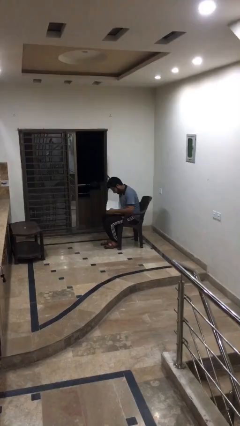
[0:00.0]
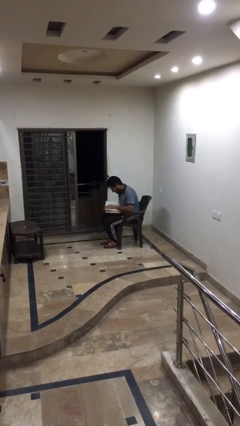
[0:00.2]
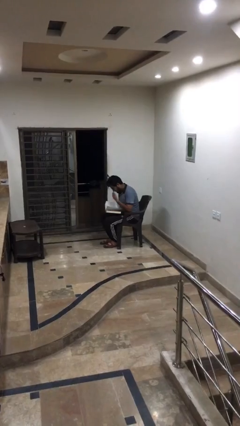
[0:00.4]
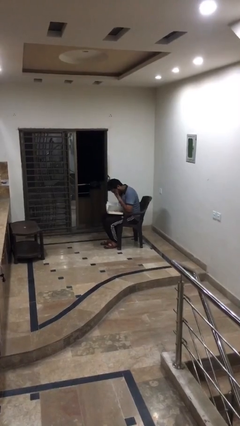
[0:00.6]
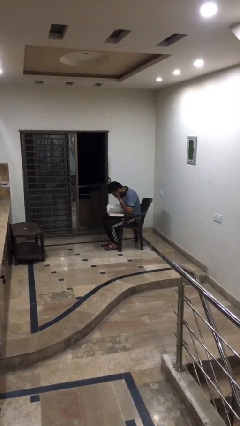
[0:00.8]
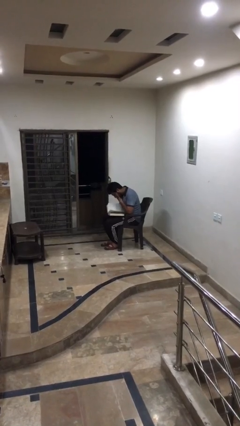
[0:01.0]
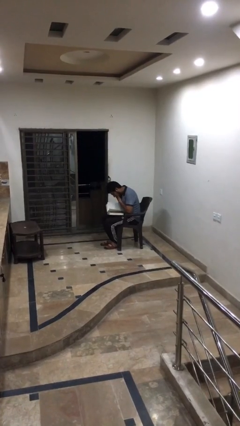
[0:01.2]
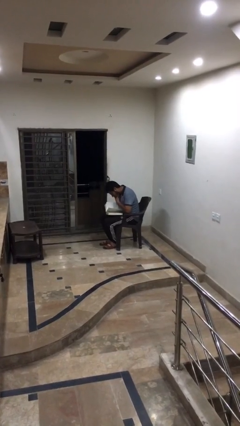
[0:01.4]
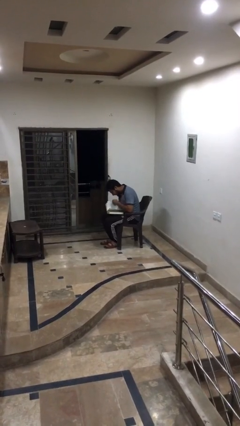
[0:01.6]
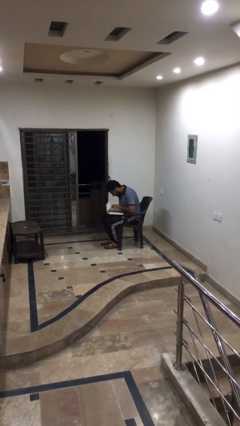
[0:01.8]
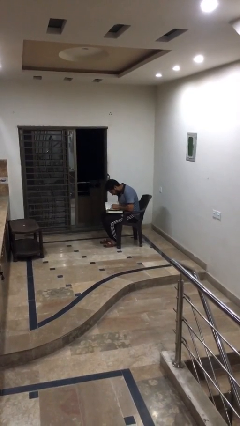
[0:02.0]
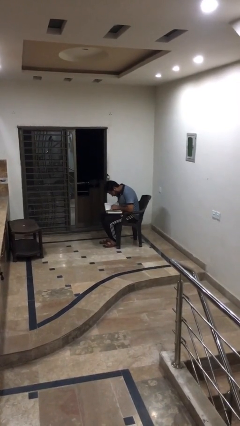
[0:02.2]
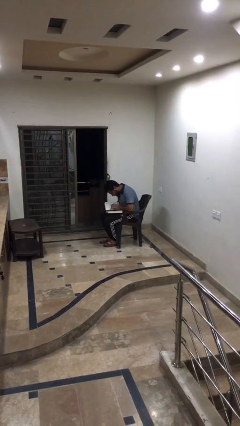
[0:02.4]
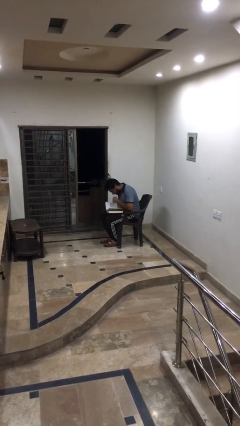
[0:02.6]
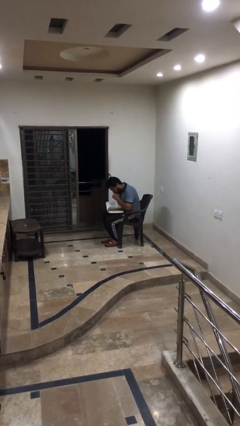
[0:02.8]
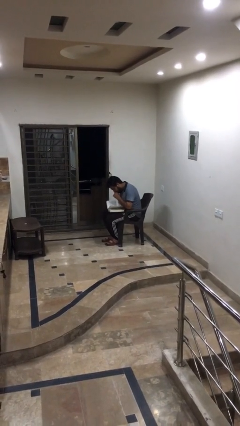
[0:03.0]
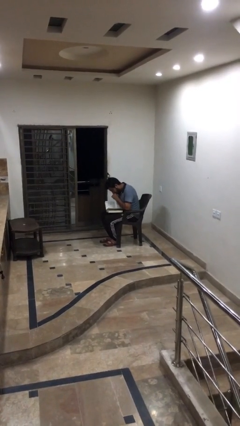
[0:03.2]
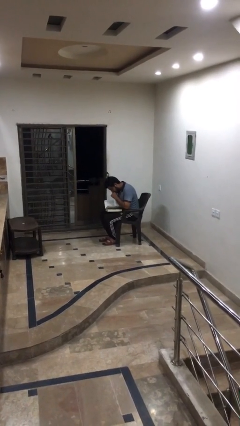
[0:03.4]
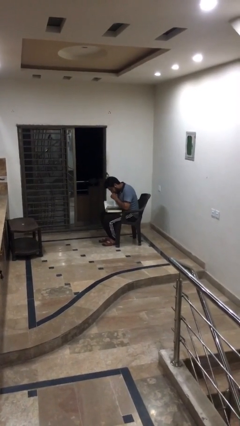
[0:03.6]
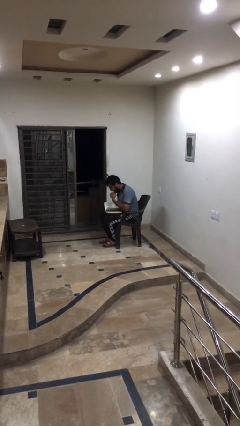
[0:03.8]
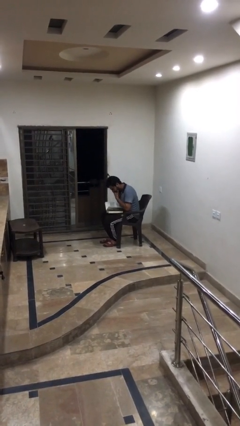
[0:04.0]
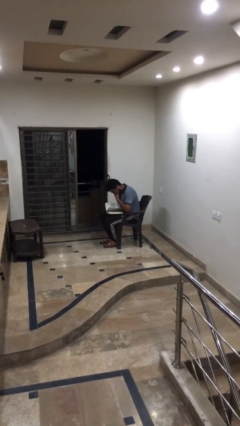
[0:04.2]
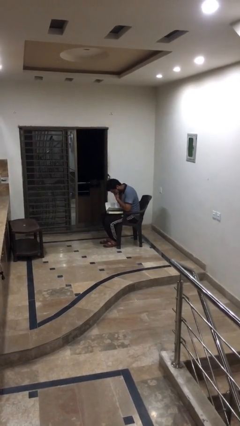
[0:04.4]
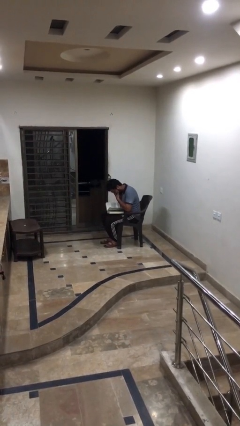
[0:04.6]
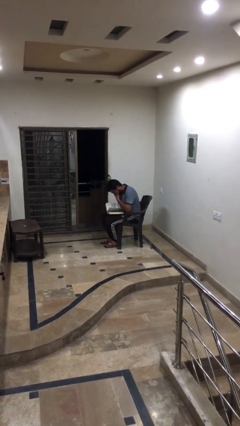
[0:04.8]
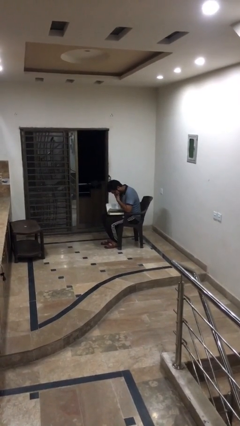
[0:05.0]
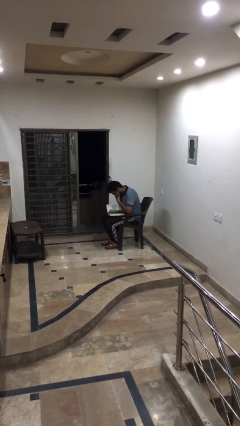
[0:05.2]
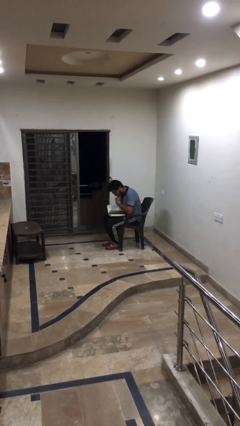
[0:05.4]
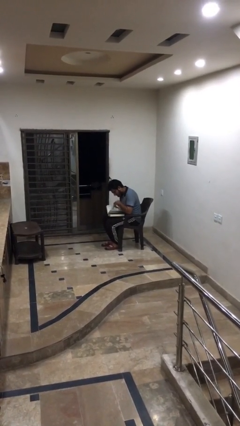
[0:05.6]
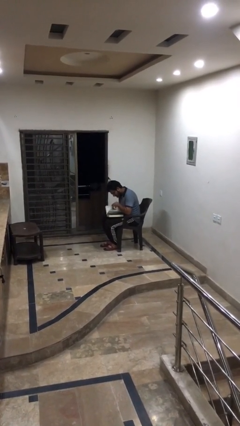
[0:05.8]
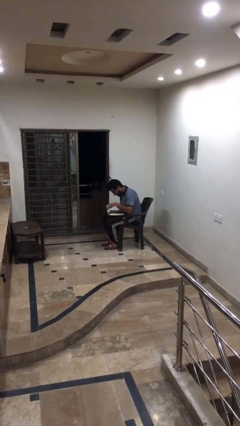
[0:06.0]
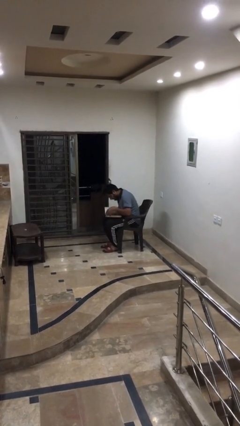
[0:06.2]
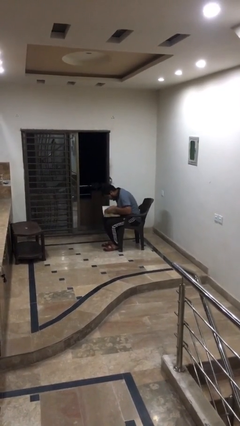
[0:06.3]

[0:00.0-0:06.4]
person reads document

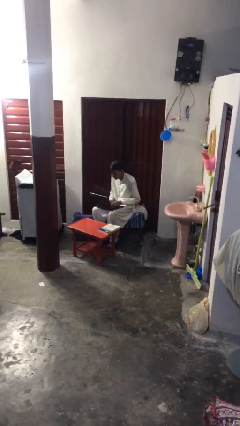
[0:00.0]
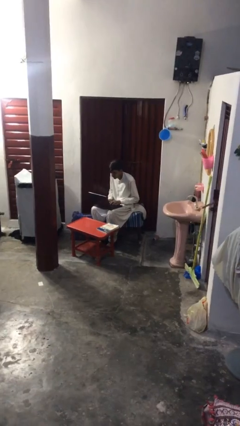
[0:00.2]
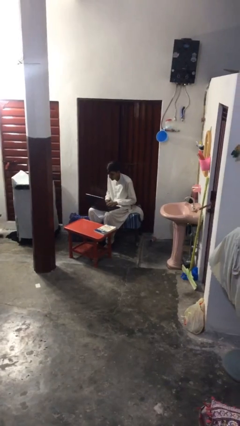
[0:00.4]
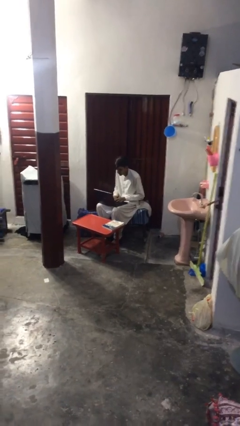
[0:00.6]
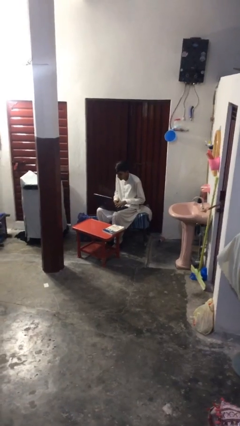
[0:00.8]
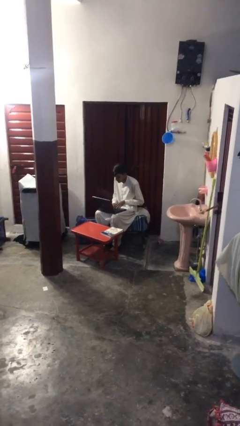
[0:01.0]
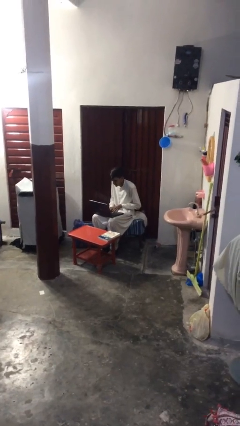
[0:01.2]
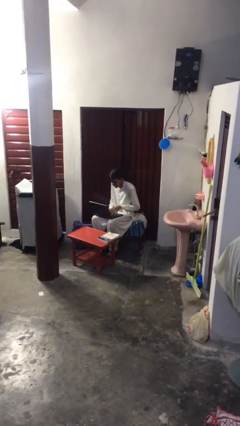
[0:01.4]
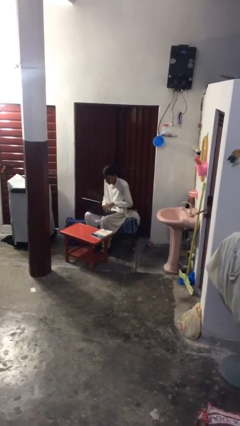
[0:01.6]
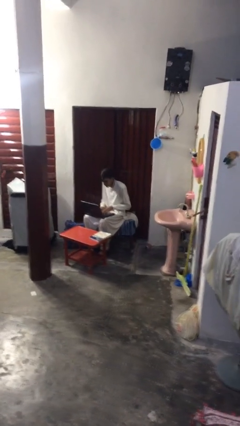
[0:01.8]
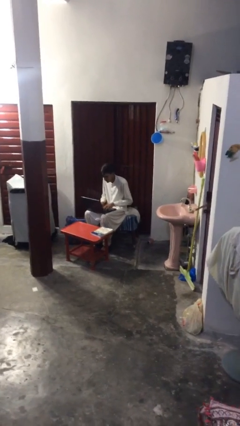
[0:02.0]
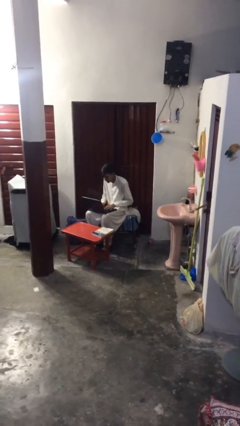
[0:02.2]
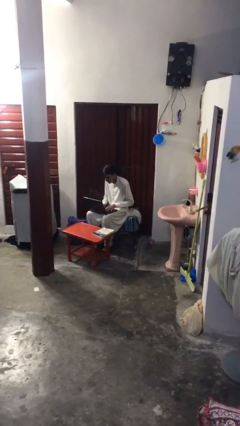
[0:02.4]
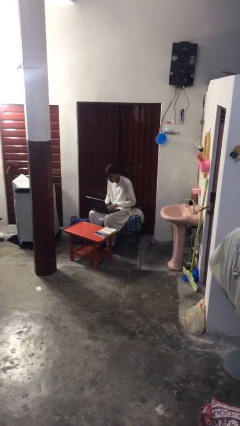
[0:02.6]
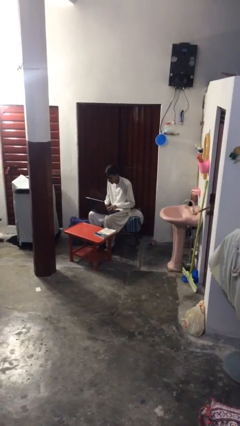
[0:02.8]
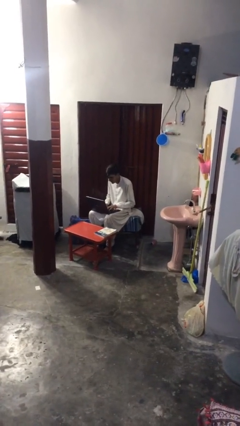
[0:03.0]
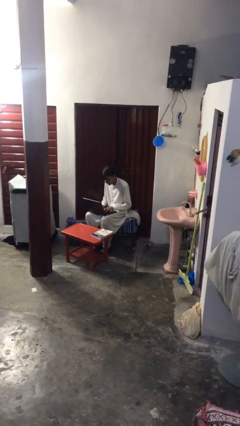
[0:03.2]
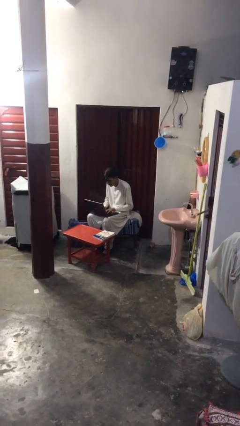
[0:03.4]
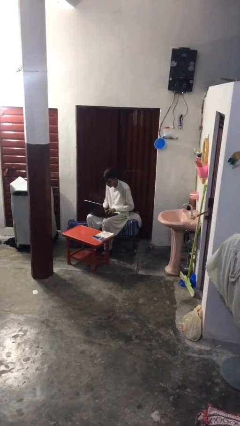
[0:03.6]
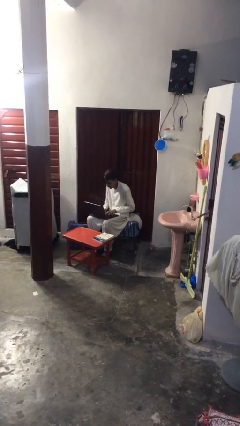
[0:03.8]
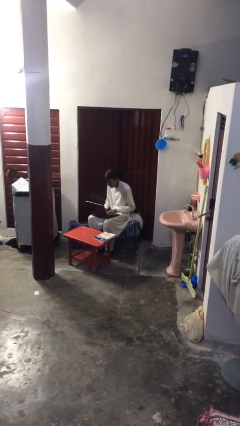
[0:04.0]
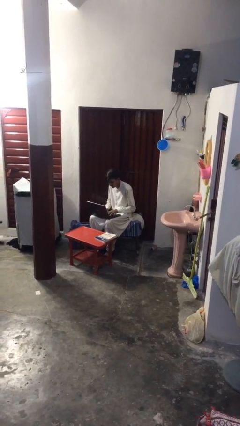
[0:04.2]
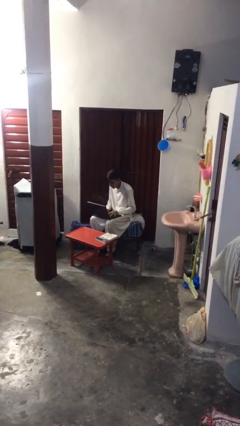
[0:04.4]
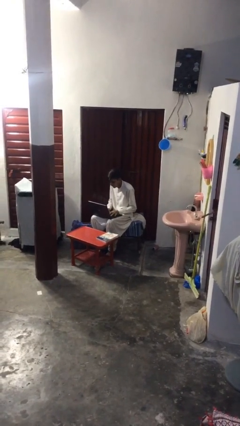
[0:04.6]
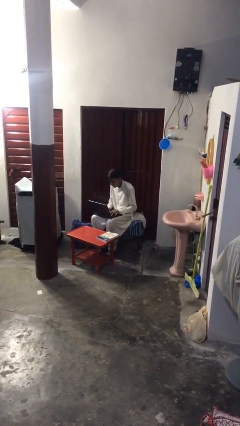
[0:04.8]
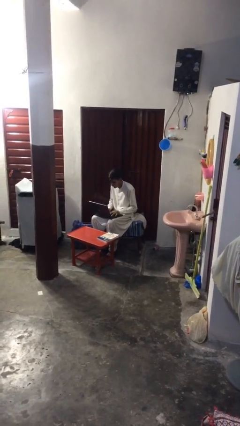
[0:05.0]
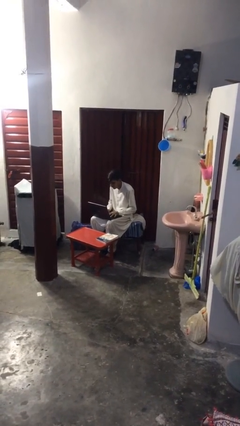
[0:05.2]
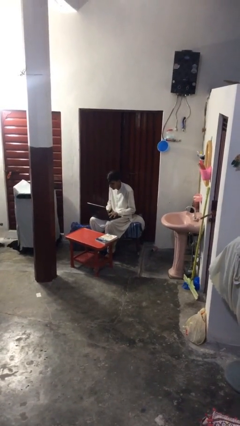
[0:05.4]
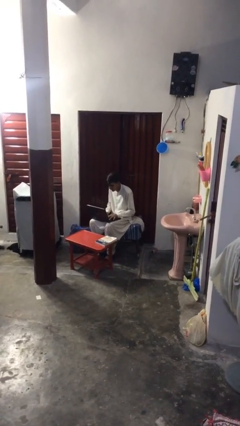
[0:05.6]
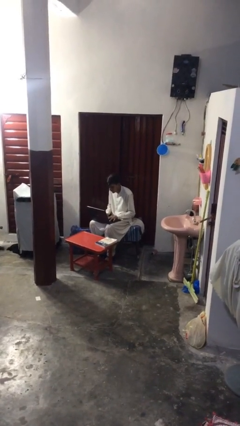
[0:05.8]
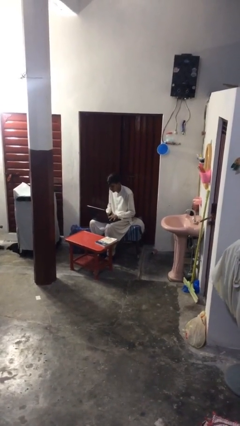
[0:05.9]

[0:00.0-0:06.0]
person interacts with laptop

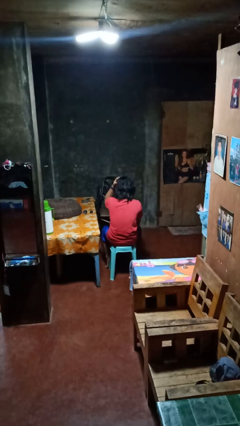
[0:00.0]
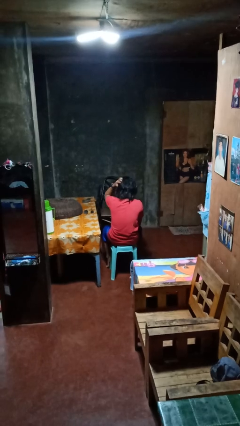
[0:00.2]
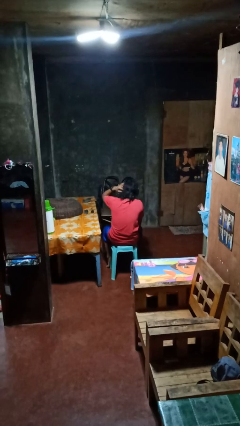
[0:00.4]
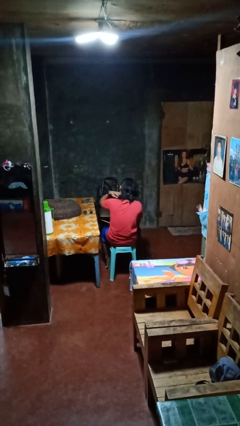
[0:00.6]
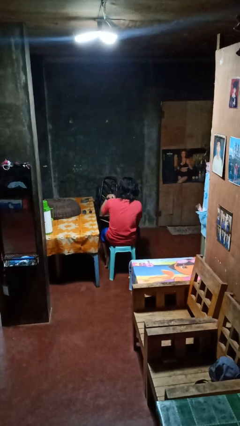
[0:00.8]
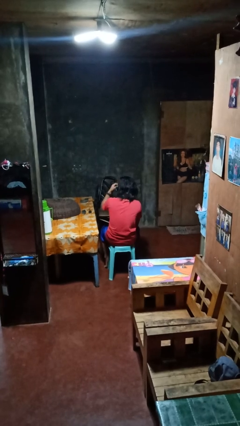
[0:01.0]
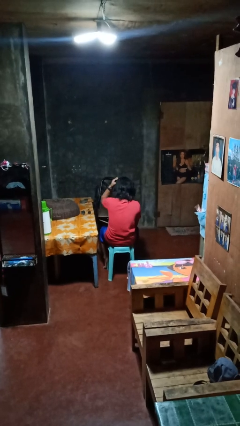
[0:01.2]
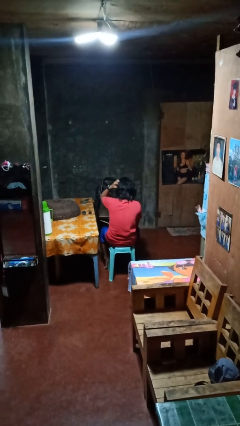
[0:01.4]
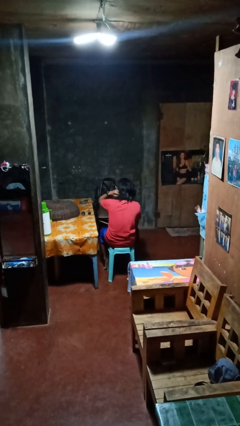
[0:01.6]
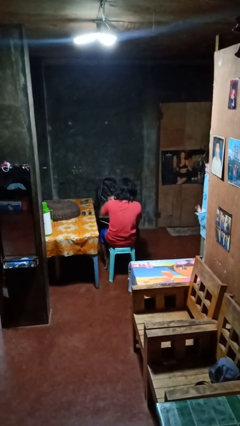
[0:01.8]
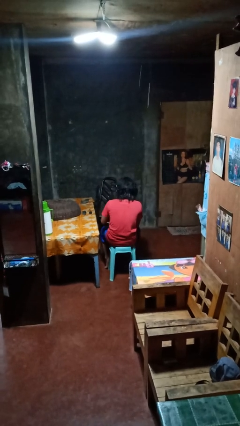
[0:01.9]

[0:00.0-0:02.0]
person strokes hair

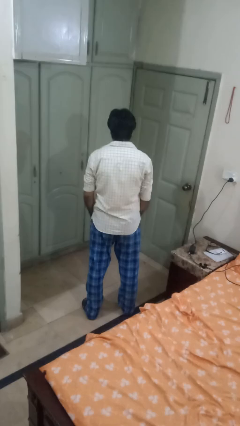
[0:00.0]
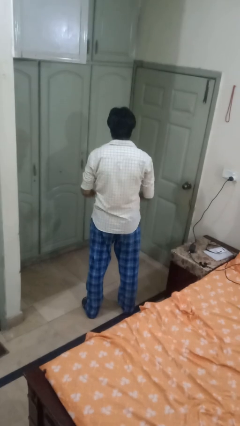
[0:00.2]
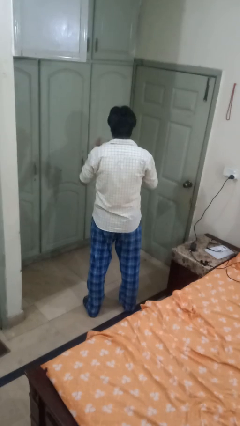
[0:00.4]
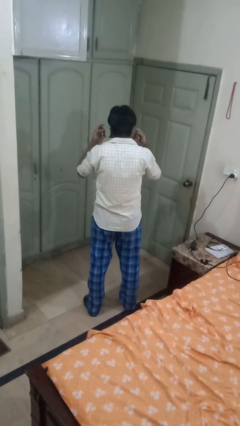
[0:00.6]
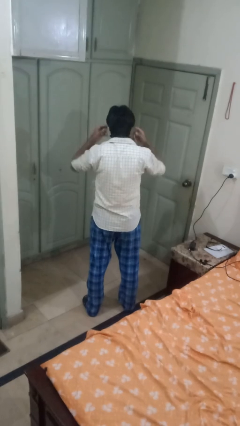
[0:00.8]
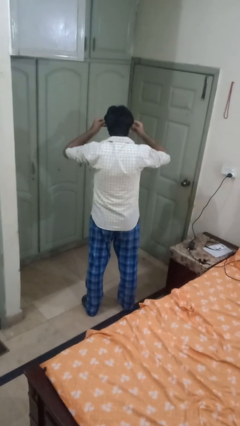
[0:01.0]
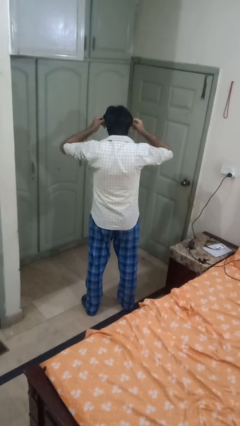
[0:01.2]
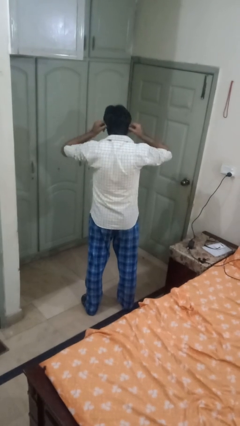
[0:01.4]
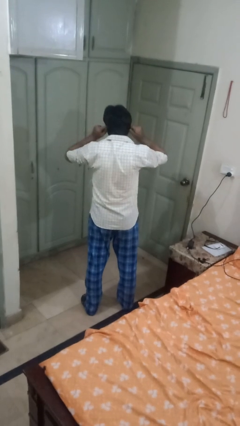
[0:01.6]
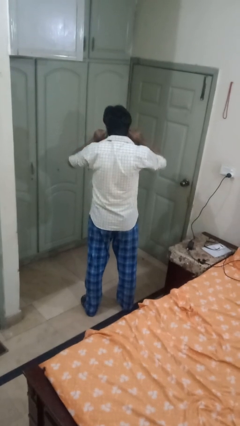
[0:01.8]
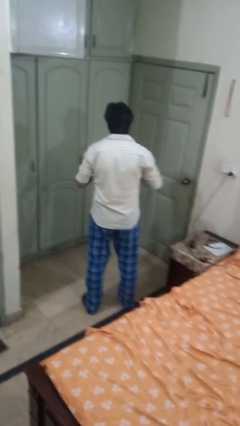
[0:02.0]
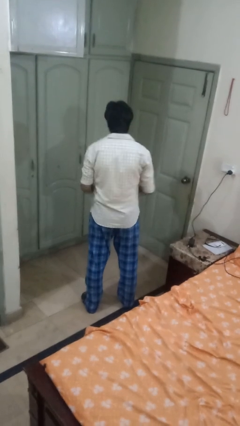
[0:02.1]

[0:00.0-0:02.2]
person puts on facemask

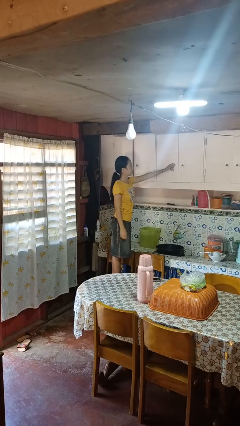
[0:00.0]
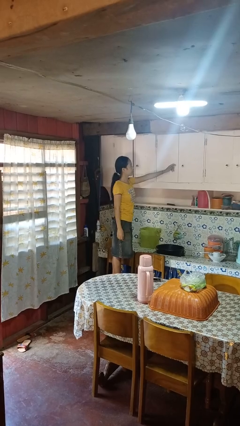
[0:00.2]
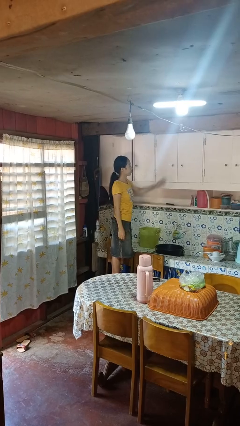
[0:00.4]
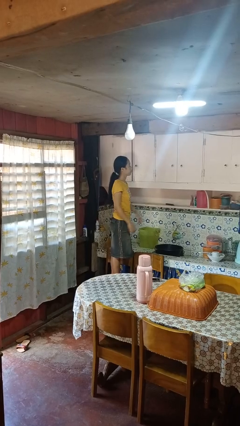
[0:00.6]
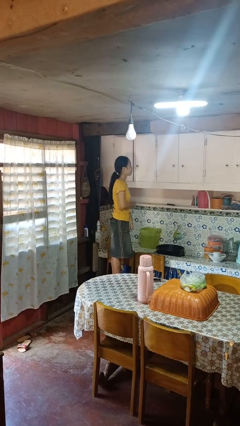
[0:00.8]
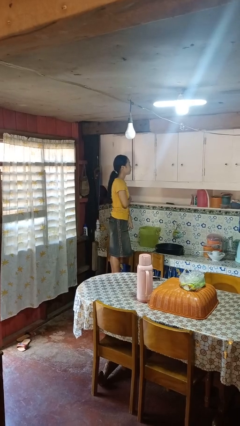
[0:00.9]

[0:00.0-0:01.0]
person closes cabinet

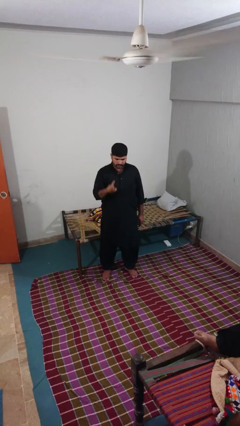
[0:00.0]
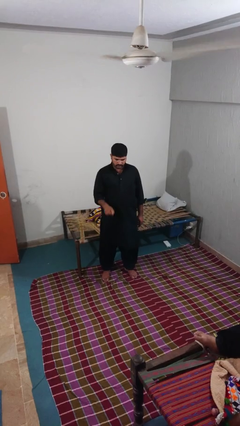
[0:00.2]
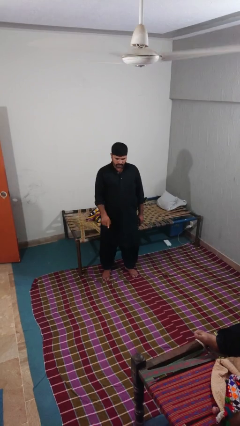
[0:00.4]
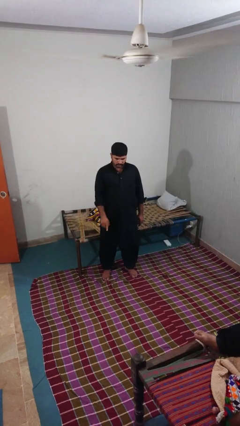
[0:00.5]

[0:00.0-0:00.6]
person gestures swipe up
